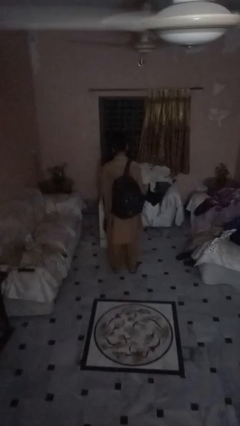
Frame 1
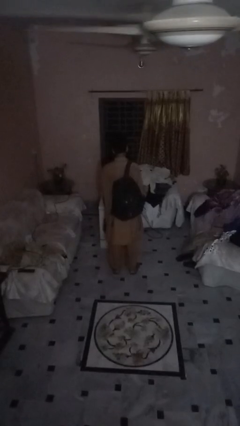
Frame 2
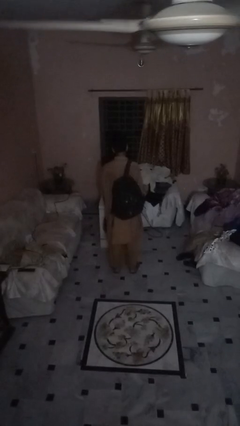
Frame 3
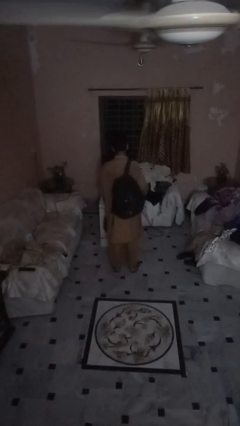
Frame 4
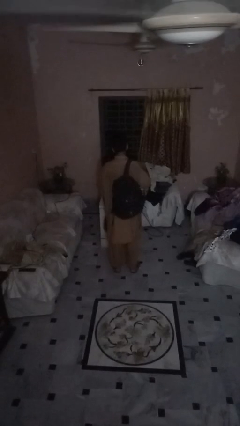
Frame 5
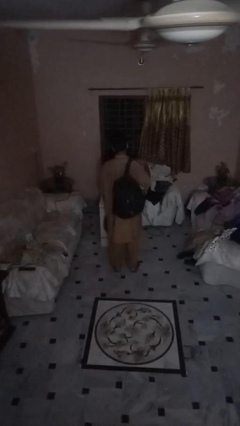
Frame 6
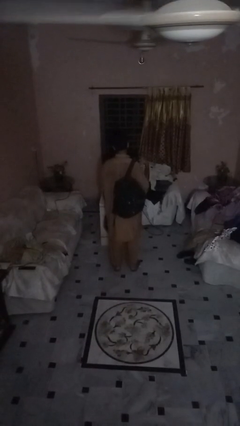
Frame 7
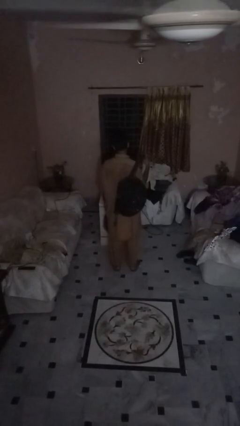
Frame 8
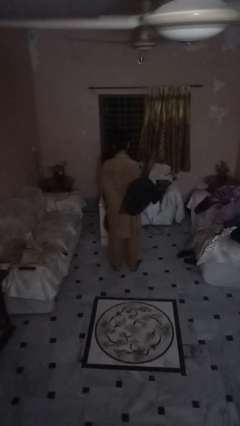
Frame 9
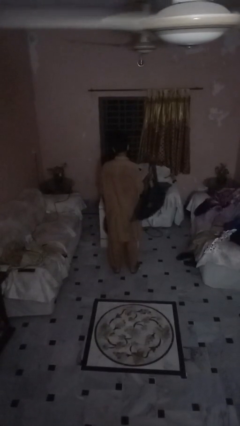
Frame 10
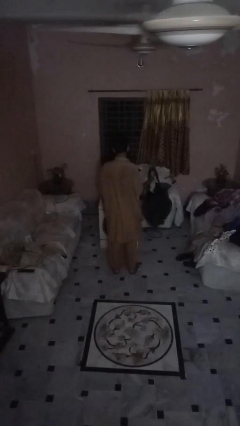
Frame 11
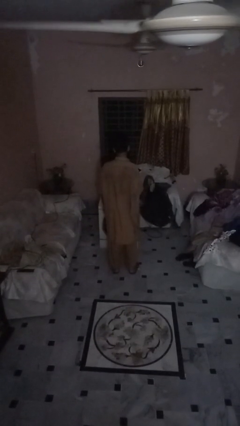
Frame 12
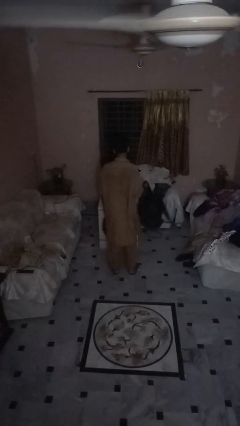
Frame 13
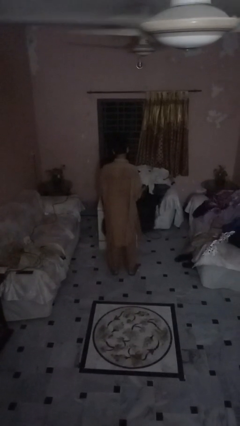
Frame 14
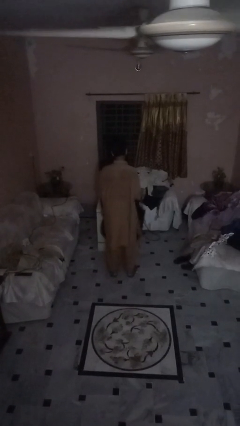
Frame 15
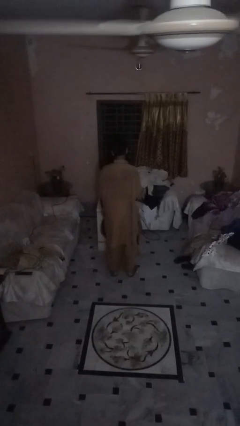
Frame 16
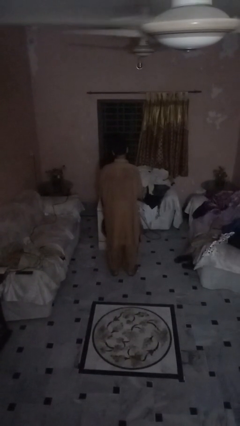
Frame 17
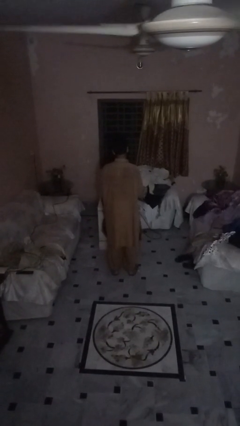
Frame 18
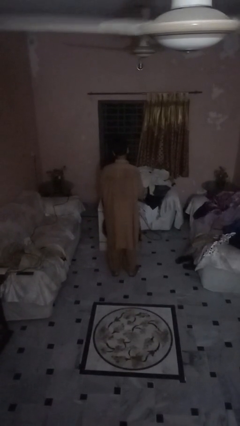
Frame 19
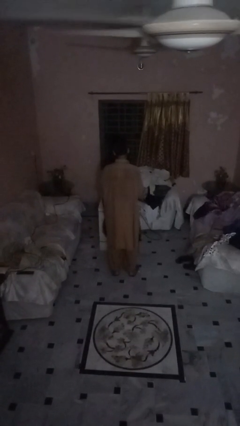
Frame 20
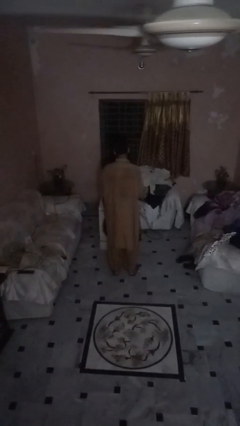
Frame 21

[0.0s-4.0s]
person takes off backpack

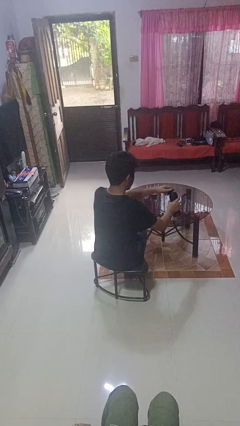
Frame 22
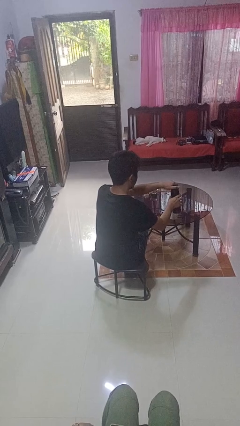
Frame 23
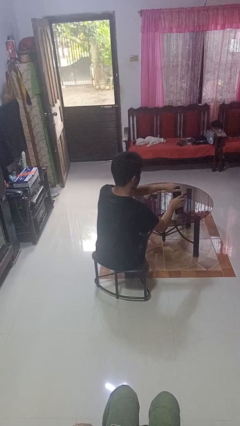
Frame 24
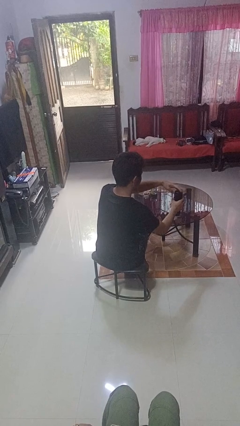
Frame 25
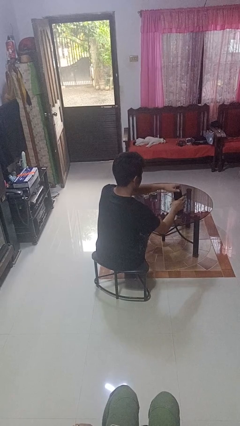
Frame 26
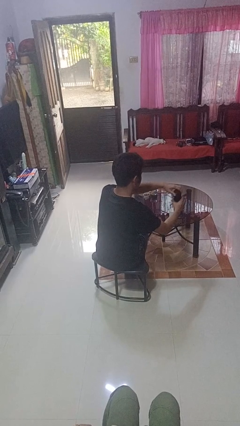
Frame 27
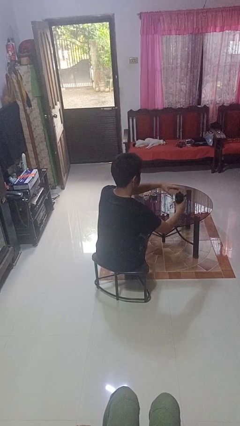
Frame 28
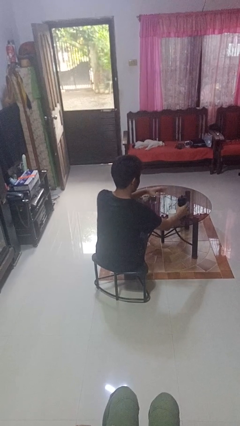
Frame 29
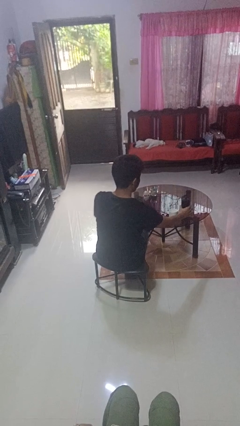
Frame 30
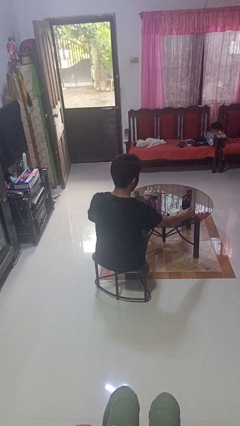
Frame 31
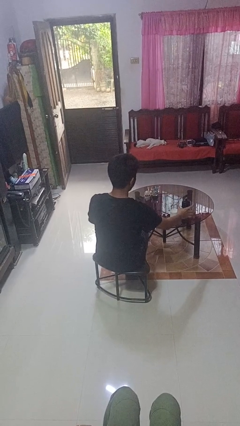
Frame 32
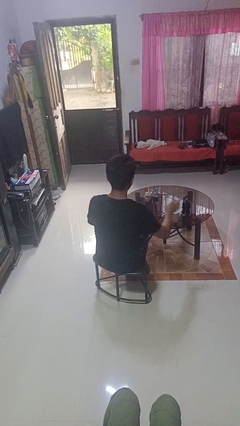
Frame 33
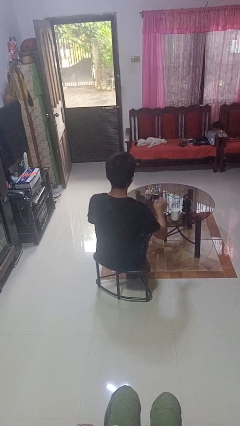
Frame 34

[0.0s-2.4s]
person screws lid to bottle

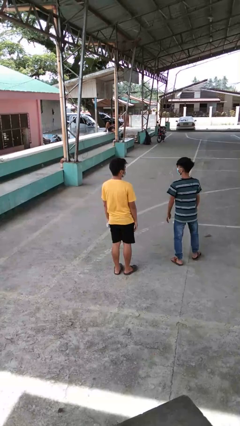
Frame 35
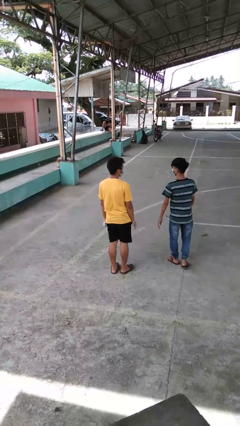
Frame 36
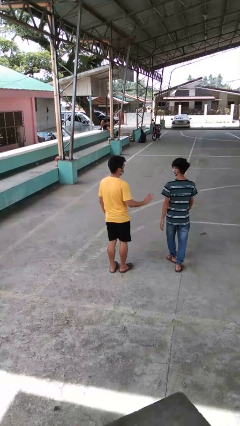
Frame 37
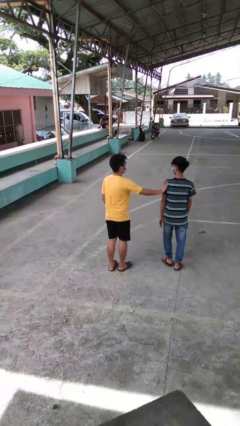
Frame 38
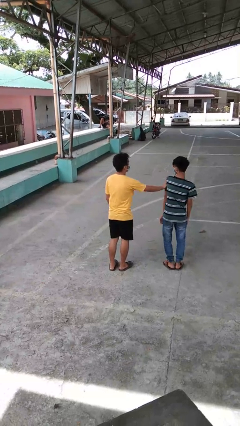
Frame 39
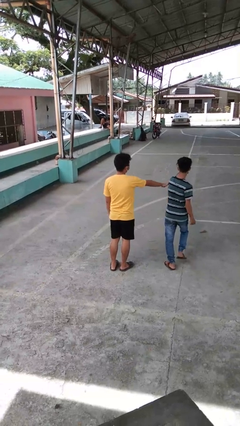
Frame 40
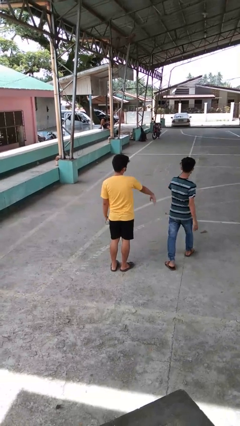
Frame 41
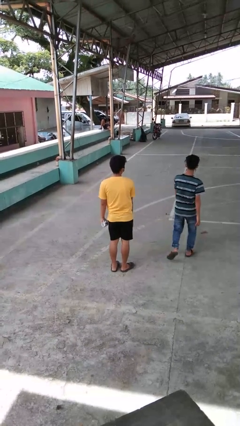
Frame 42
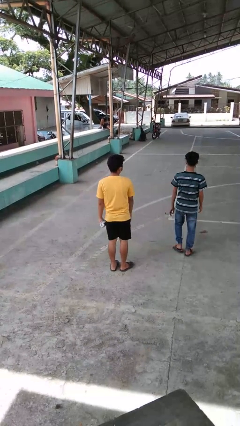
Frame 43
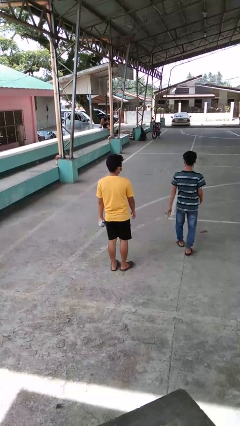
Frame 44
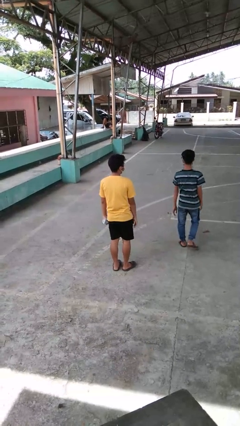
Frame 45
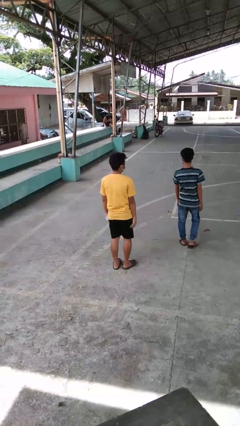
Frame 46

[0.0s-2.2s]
person shoves person

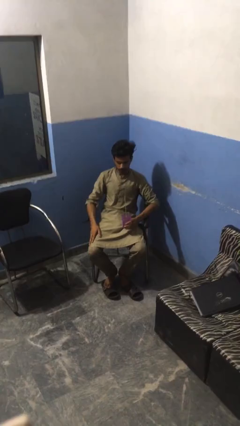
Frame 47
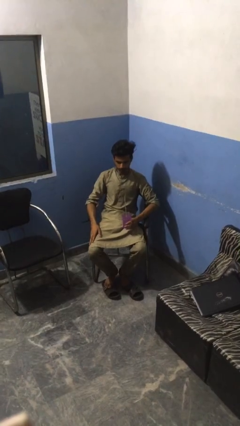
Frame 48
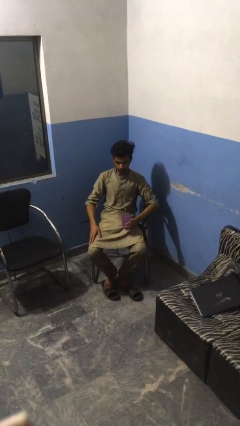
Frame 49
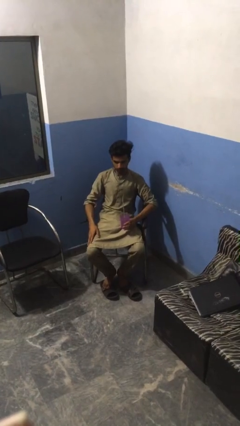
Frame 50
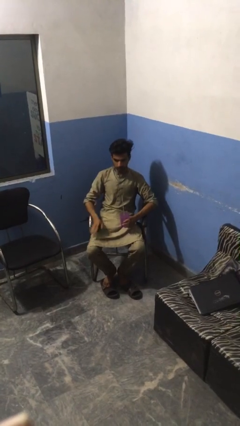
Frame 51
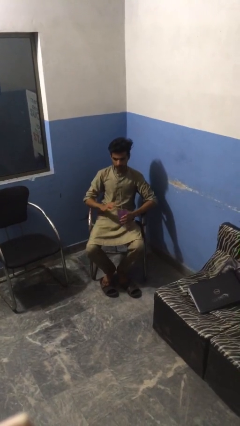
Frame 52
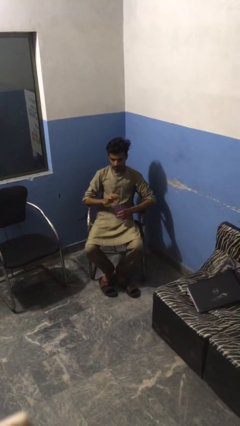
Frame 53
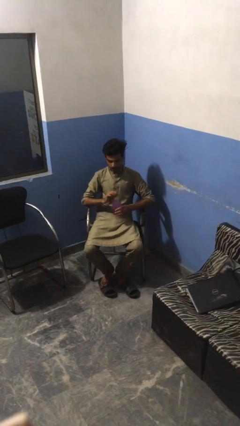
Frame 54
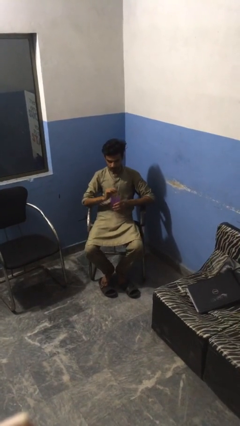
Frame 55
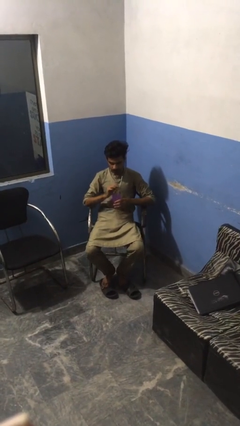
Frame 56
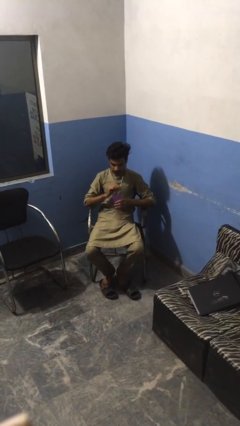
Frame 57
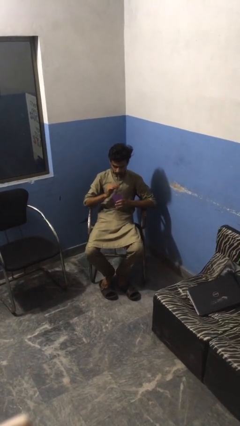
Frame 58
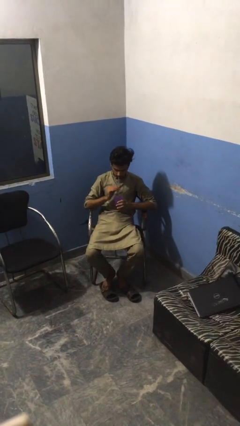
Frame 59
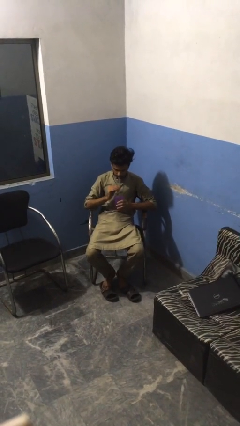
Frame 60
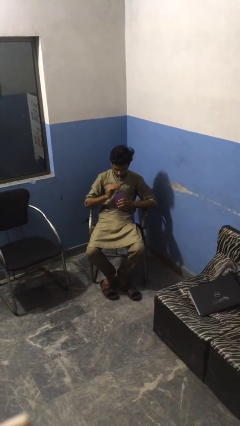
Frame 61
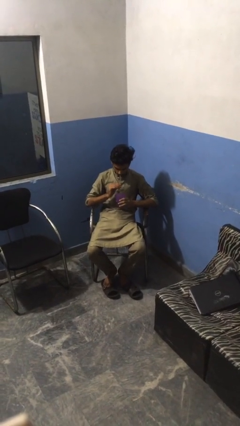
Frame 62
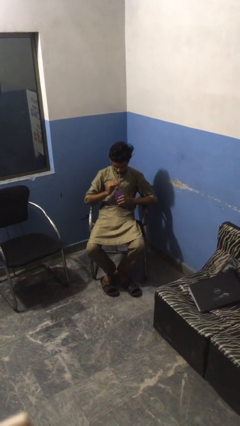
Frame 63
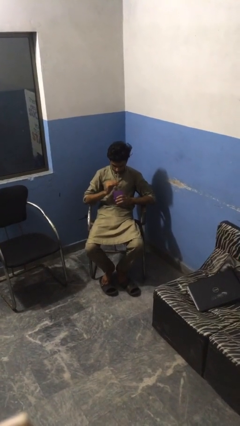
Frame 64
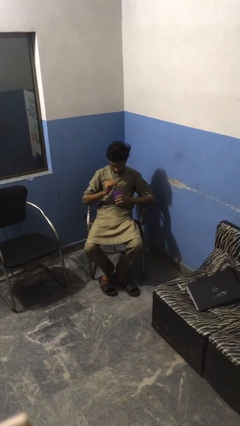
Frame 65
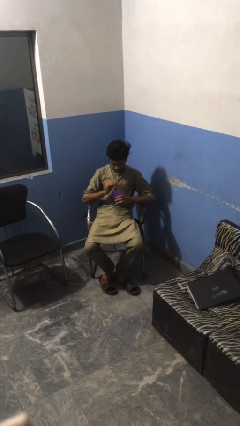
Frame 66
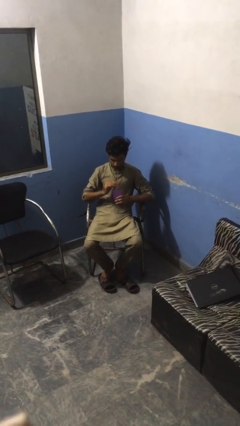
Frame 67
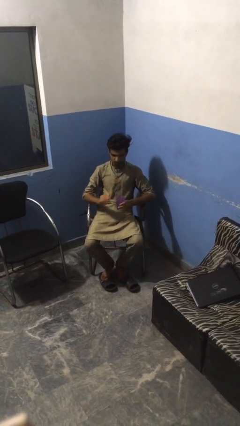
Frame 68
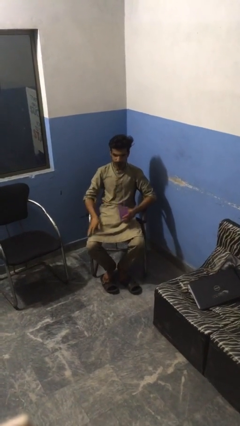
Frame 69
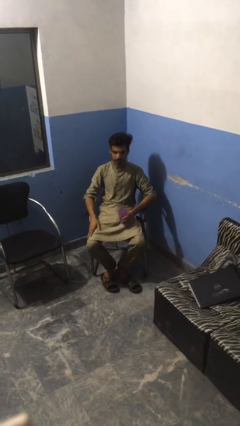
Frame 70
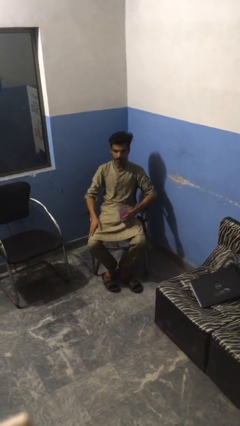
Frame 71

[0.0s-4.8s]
person drinks from straw

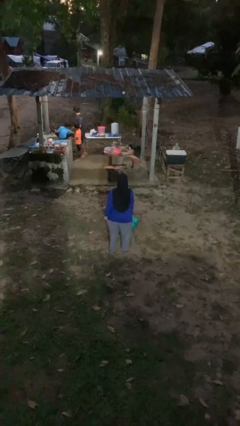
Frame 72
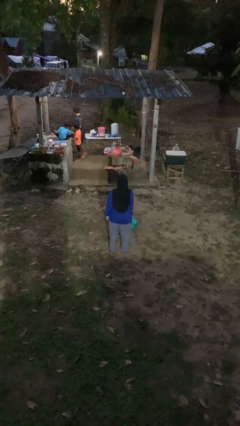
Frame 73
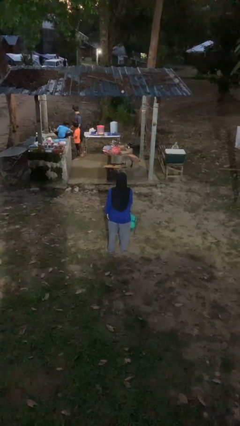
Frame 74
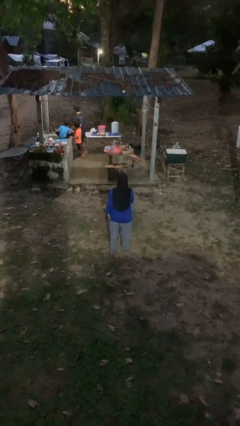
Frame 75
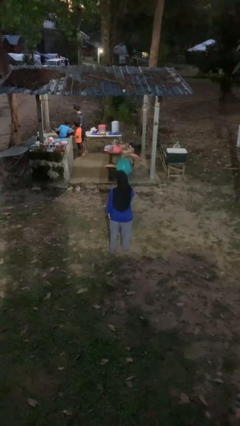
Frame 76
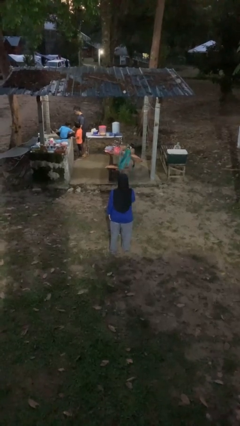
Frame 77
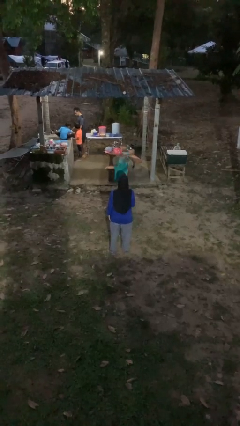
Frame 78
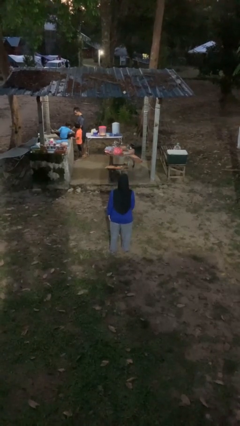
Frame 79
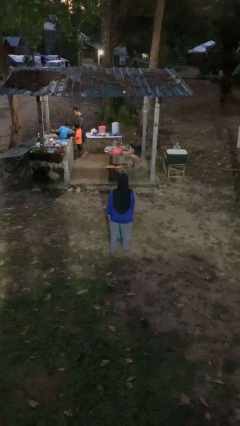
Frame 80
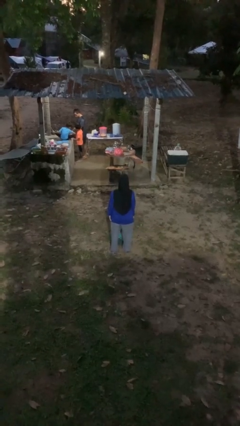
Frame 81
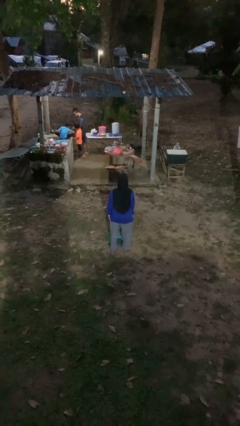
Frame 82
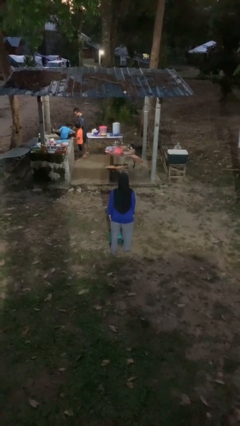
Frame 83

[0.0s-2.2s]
person throws object into air

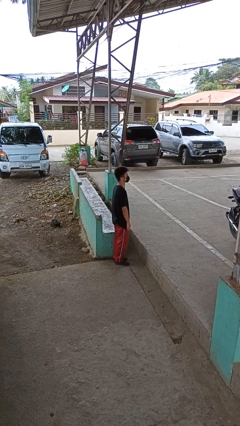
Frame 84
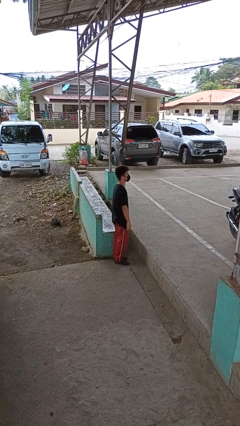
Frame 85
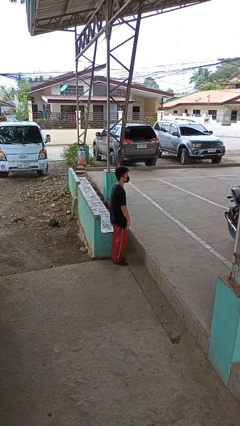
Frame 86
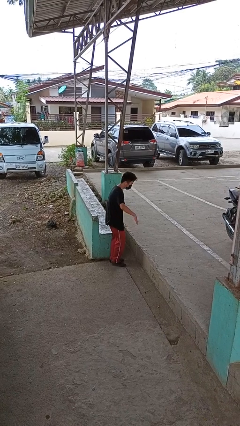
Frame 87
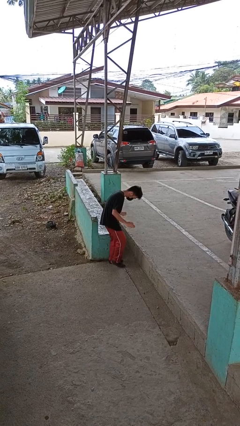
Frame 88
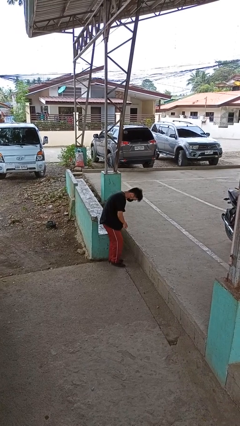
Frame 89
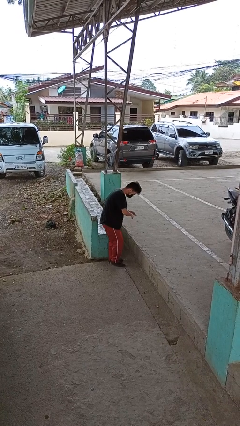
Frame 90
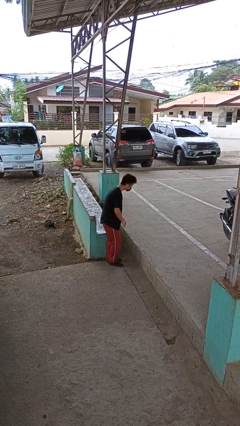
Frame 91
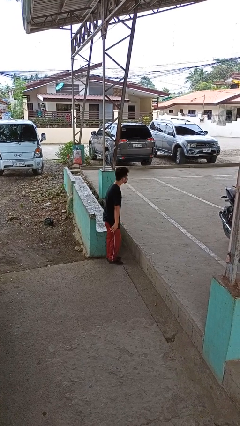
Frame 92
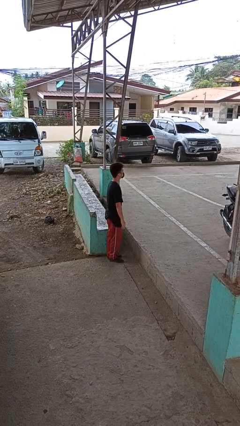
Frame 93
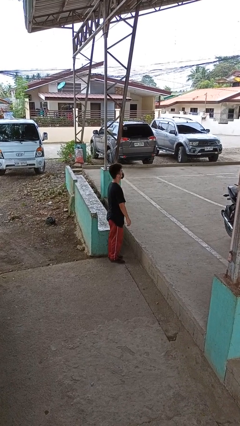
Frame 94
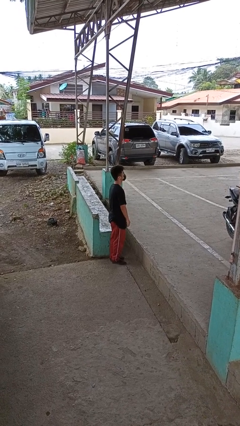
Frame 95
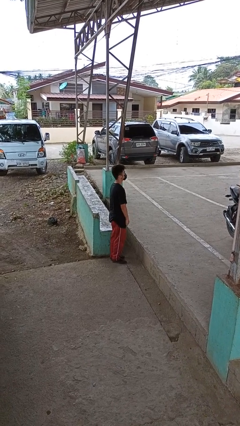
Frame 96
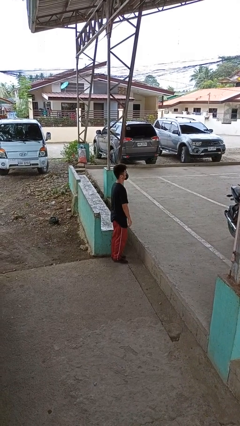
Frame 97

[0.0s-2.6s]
person slaps hands on thighs
